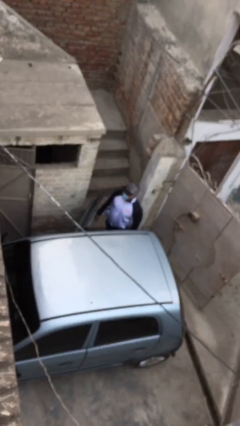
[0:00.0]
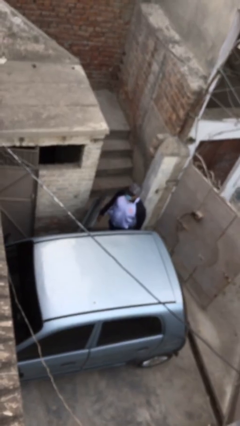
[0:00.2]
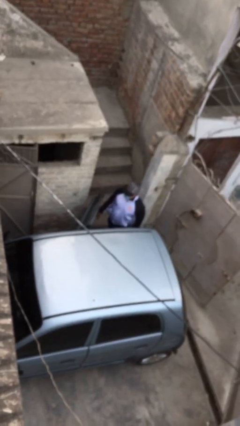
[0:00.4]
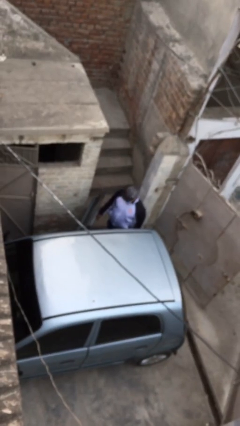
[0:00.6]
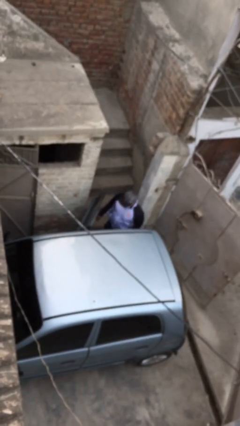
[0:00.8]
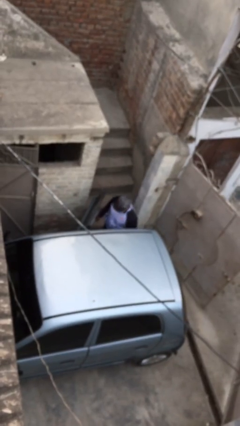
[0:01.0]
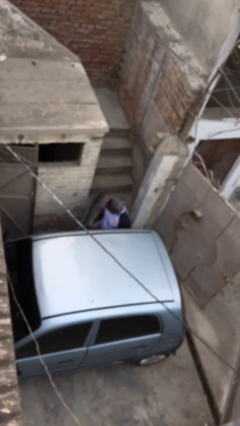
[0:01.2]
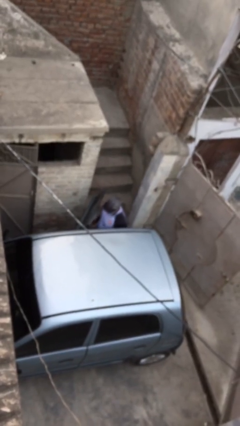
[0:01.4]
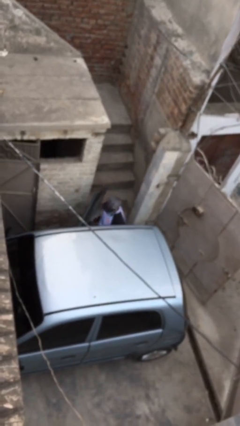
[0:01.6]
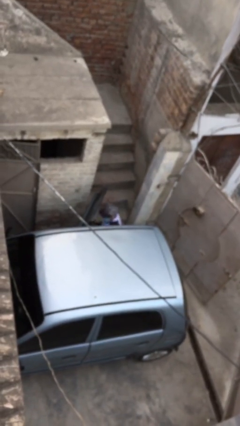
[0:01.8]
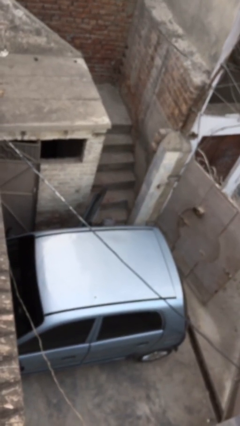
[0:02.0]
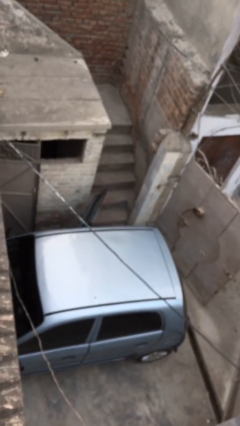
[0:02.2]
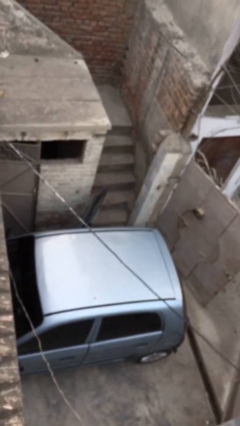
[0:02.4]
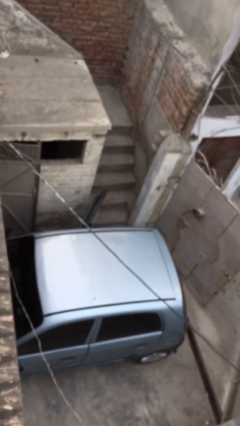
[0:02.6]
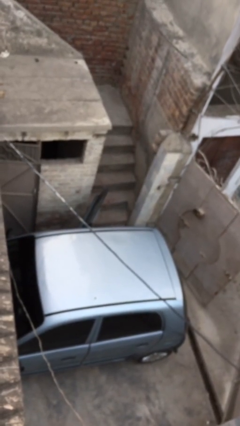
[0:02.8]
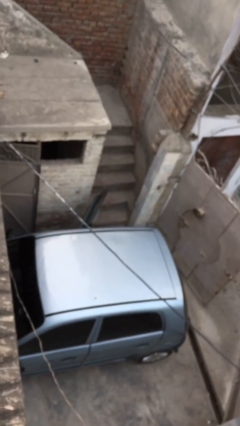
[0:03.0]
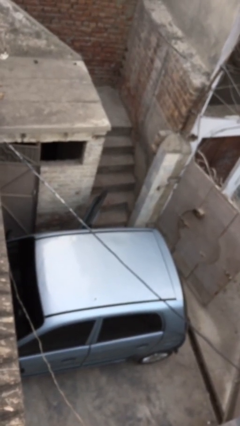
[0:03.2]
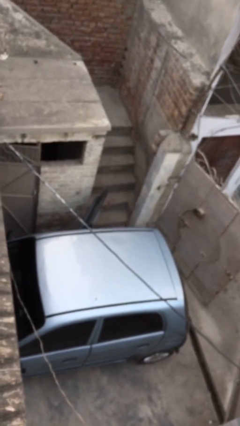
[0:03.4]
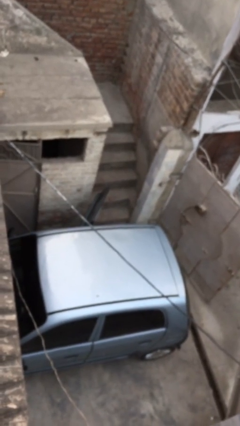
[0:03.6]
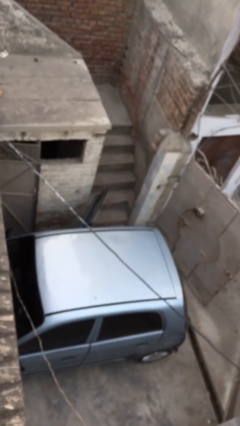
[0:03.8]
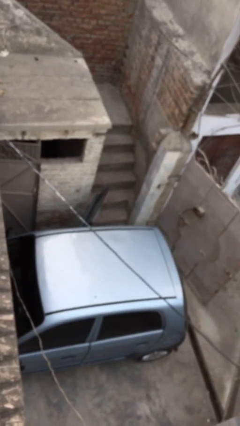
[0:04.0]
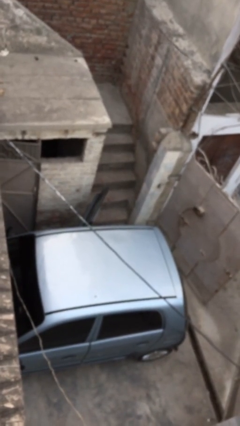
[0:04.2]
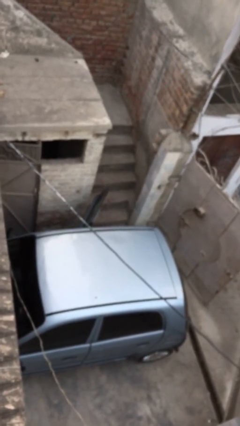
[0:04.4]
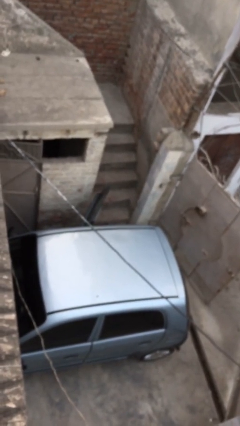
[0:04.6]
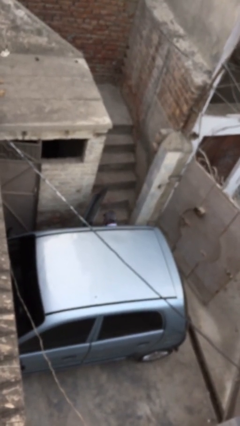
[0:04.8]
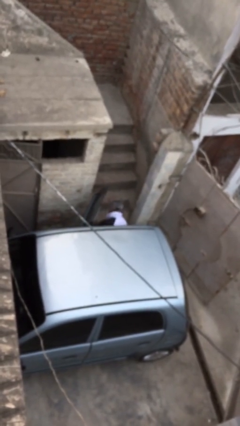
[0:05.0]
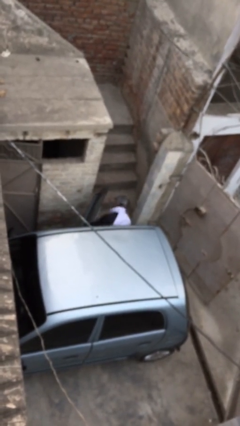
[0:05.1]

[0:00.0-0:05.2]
person enters car

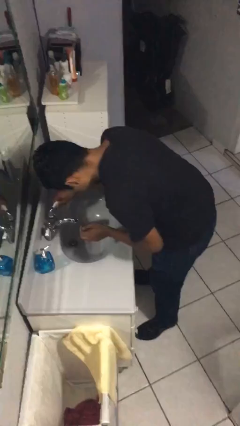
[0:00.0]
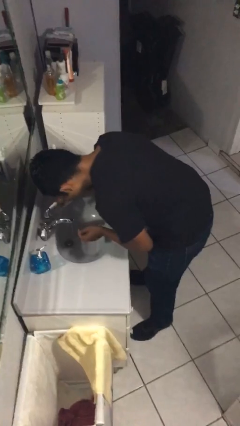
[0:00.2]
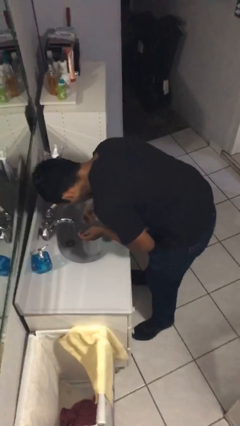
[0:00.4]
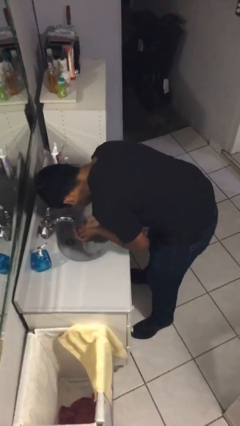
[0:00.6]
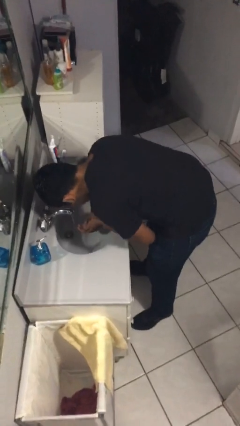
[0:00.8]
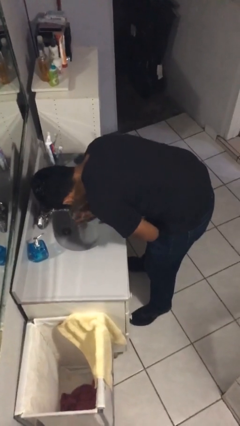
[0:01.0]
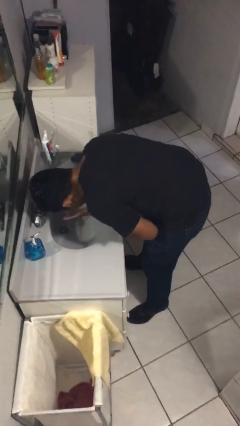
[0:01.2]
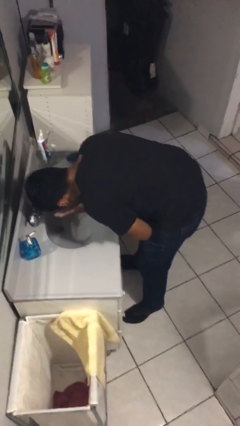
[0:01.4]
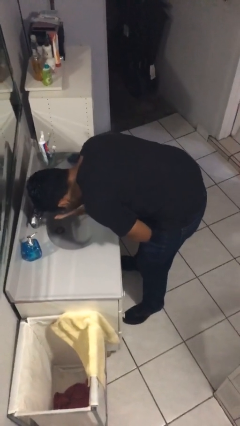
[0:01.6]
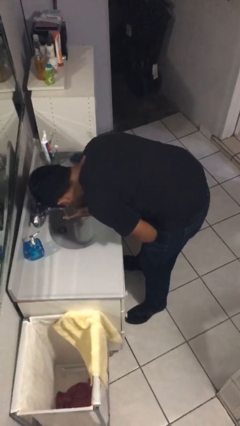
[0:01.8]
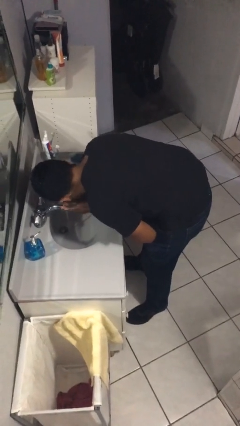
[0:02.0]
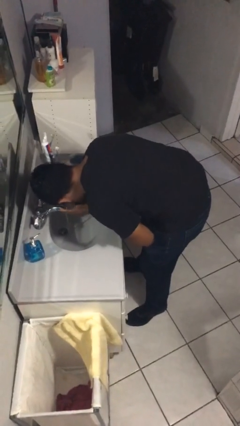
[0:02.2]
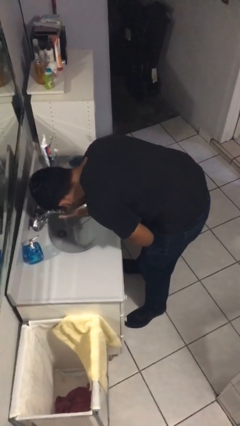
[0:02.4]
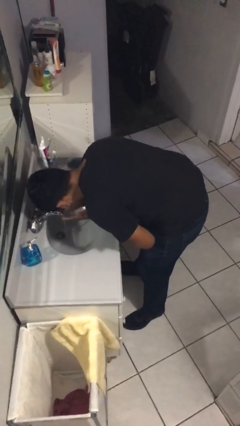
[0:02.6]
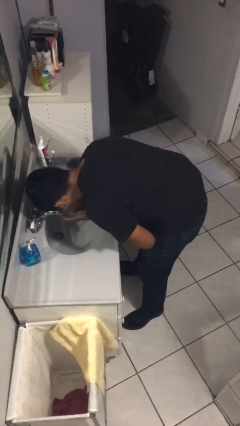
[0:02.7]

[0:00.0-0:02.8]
person washes face

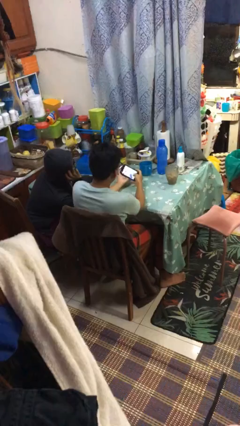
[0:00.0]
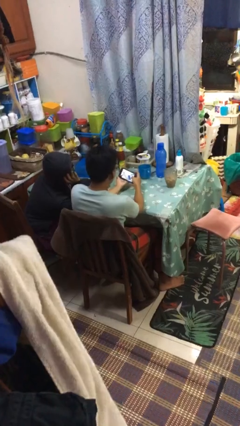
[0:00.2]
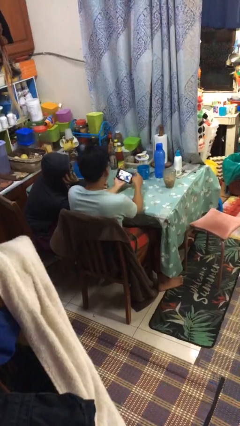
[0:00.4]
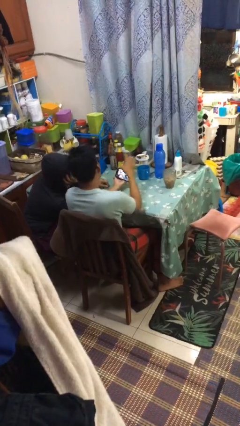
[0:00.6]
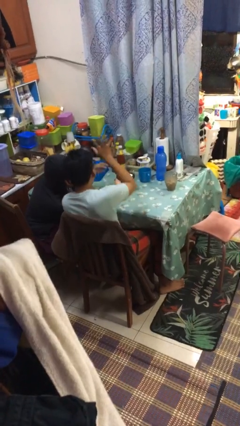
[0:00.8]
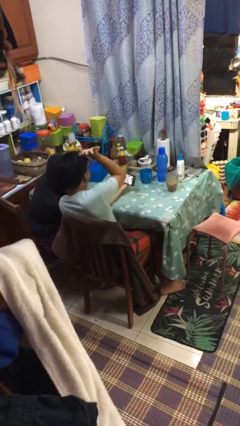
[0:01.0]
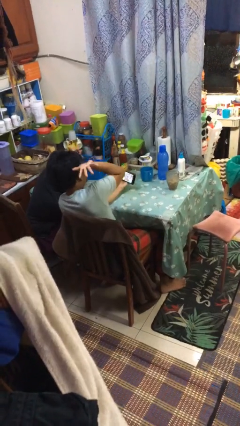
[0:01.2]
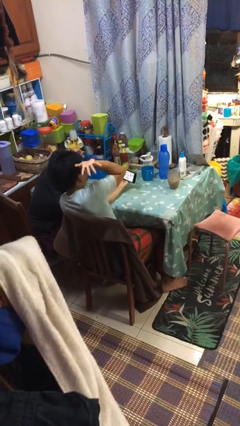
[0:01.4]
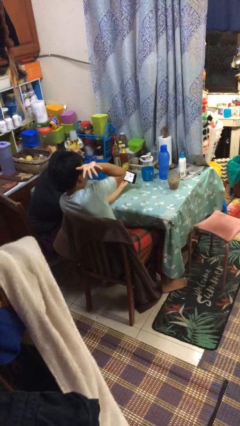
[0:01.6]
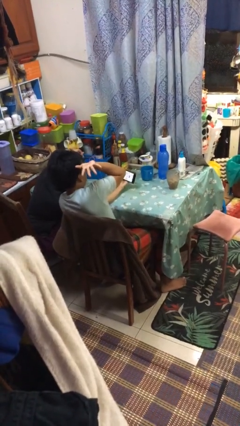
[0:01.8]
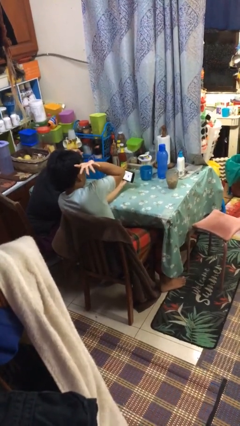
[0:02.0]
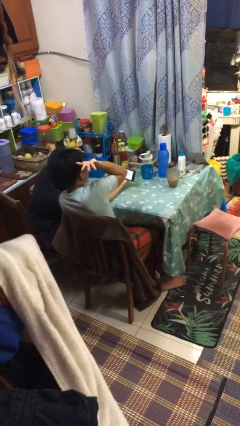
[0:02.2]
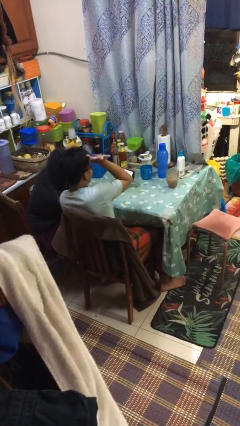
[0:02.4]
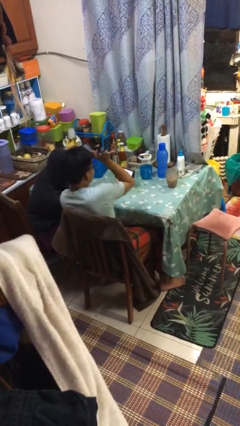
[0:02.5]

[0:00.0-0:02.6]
person takes selfie with person

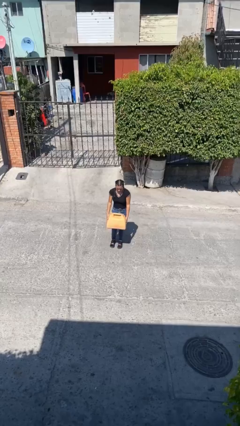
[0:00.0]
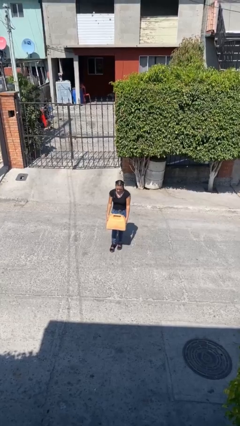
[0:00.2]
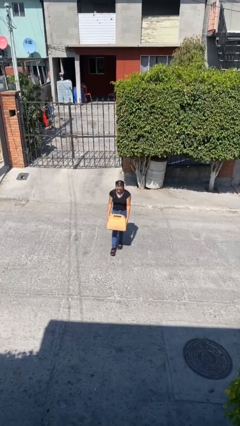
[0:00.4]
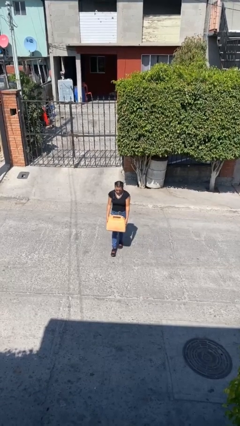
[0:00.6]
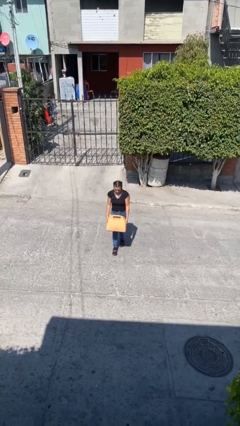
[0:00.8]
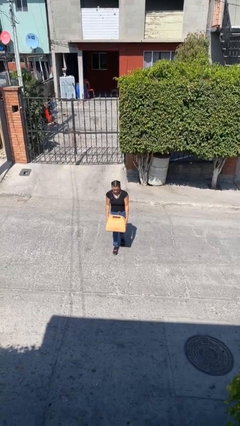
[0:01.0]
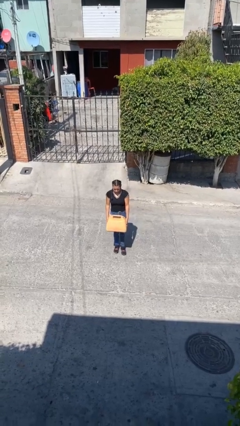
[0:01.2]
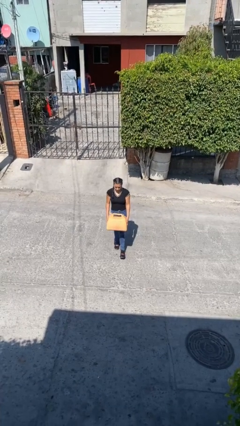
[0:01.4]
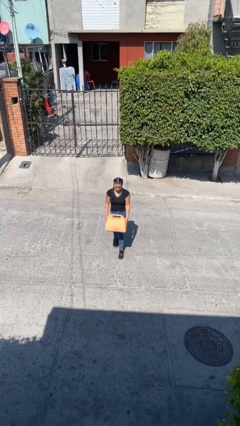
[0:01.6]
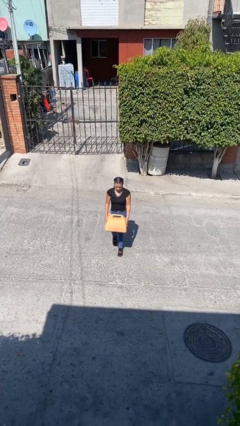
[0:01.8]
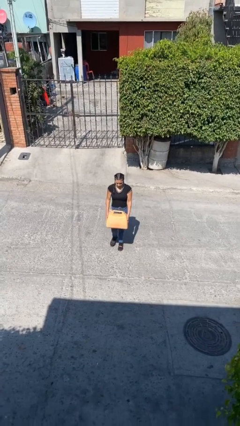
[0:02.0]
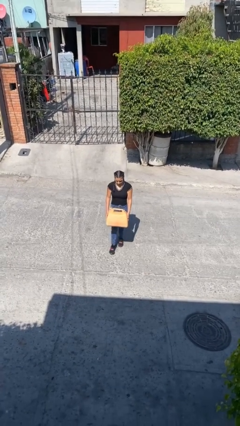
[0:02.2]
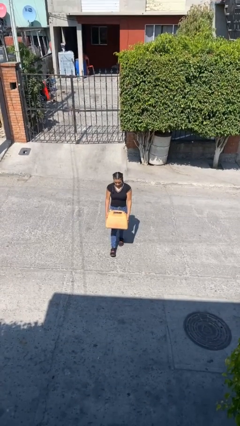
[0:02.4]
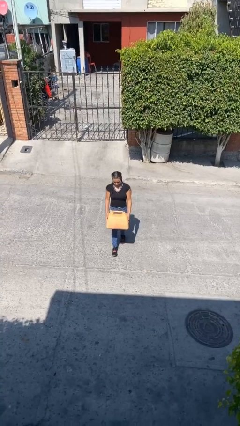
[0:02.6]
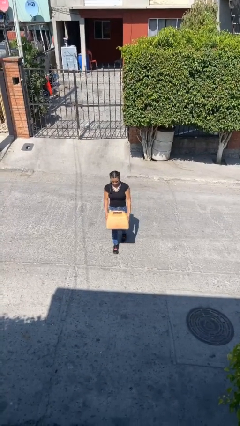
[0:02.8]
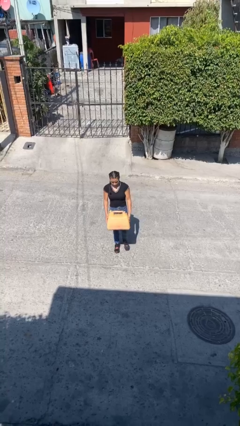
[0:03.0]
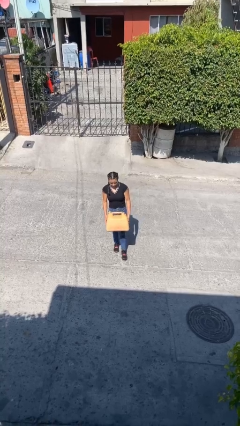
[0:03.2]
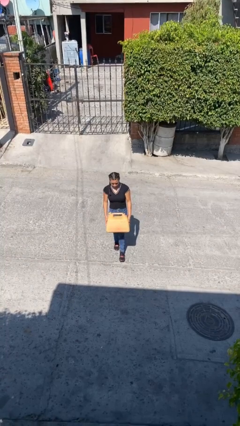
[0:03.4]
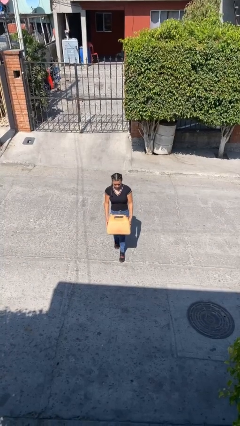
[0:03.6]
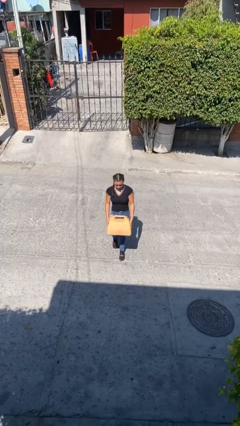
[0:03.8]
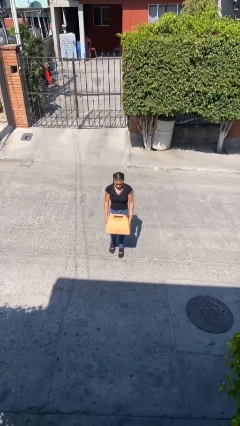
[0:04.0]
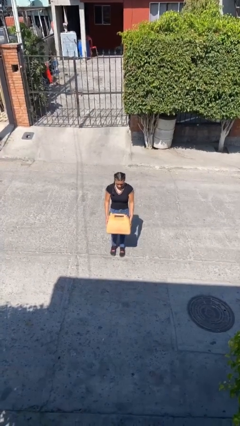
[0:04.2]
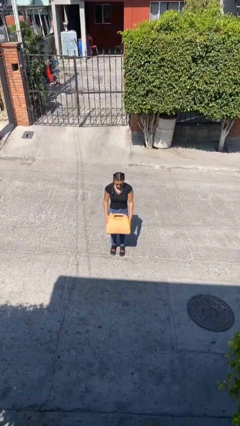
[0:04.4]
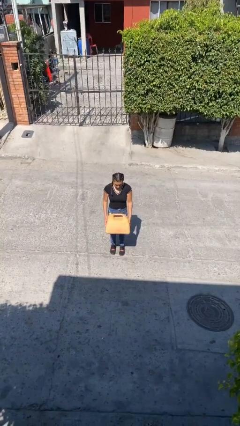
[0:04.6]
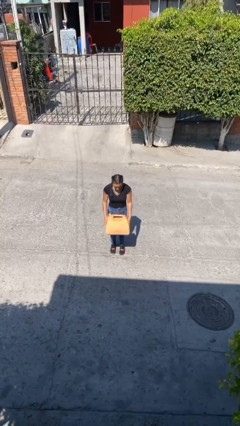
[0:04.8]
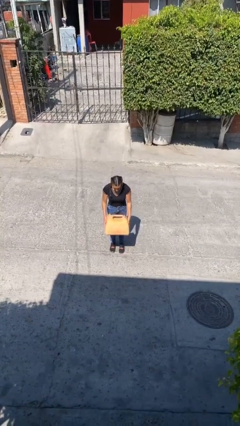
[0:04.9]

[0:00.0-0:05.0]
person carries heavy object

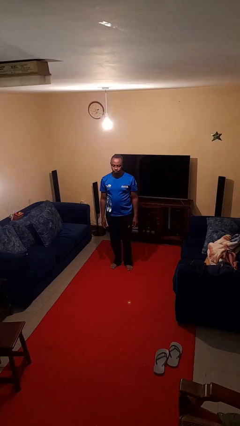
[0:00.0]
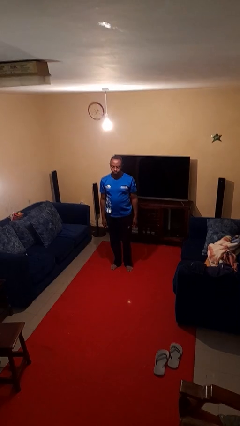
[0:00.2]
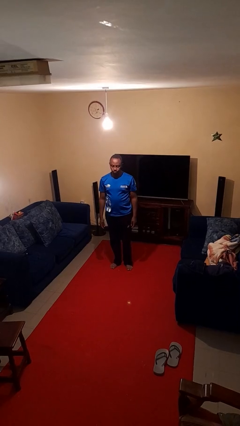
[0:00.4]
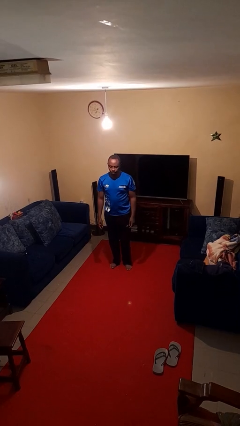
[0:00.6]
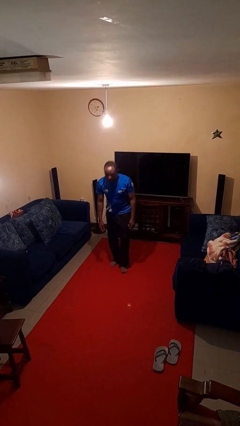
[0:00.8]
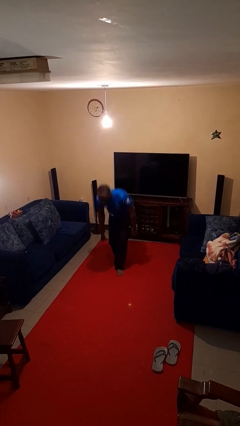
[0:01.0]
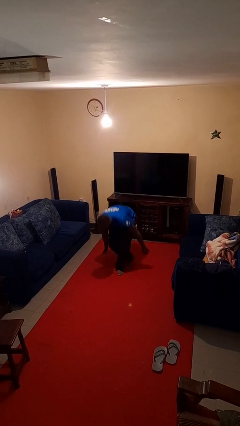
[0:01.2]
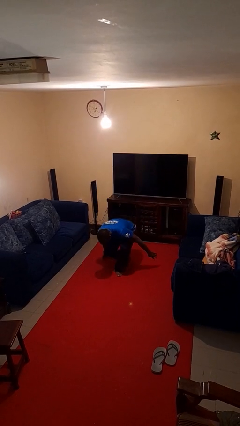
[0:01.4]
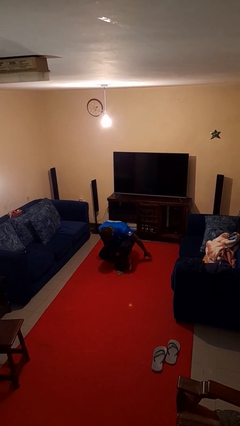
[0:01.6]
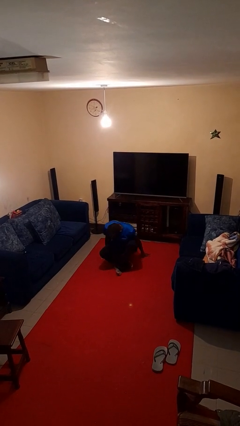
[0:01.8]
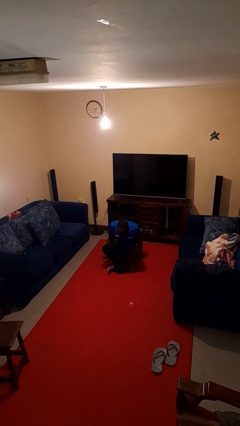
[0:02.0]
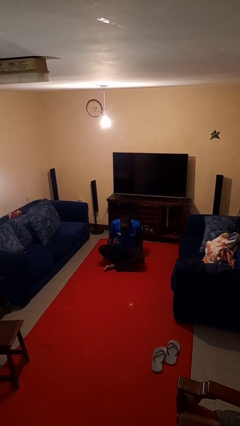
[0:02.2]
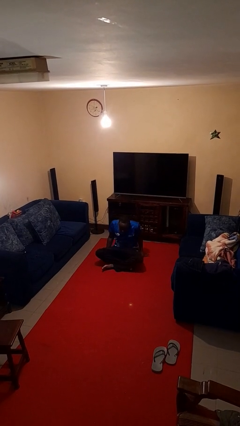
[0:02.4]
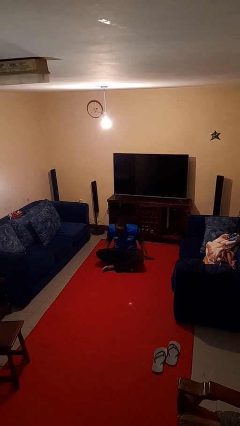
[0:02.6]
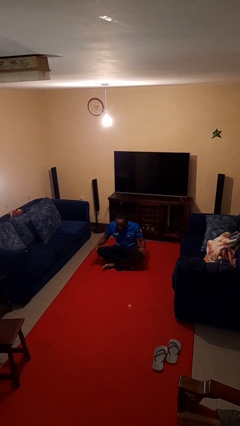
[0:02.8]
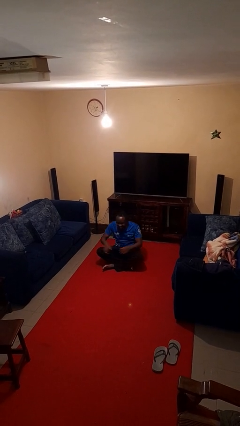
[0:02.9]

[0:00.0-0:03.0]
person sits crisscross
